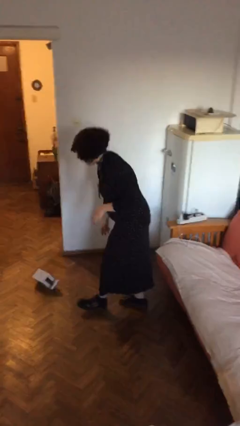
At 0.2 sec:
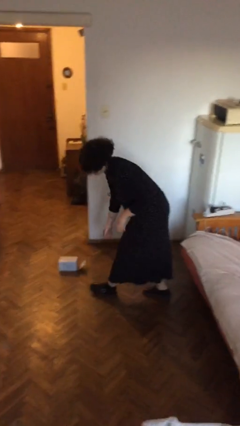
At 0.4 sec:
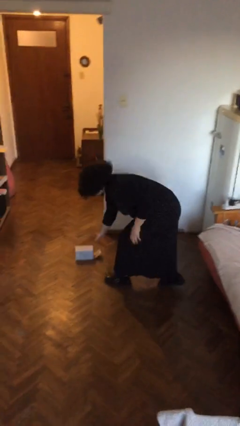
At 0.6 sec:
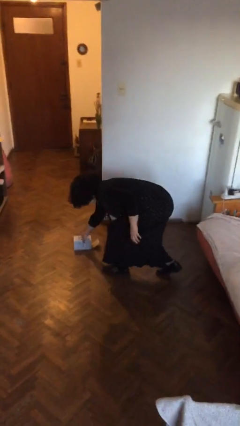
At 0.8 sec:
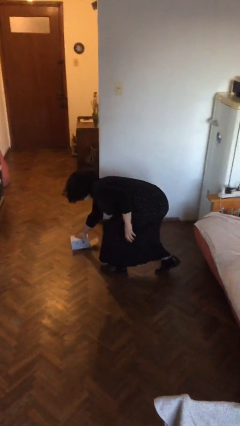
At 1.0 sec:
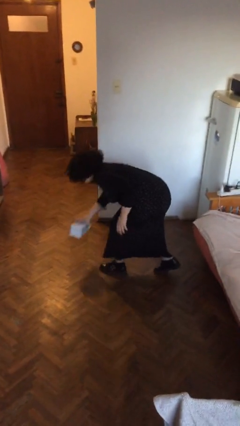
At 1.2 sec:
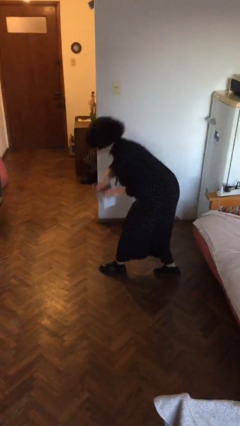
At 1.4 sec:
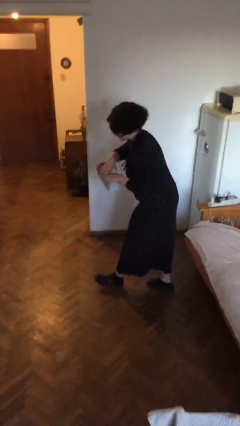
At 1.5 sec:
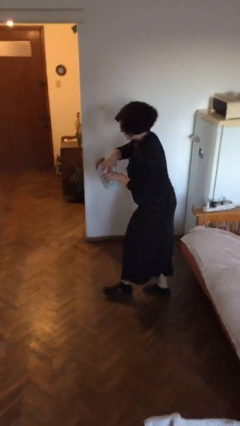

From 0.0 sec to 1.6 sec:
person picks up object from floor

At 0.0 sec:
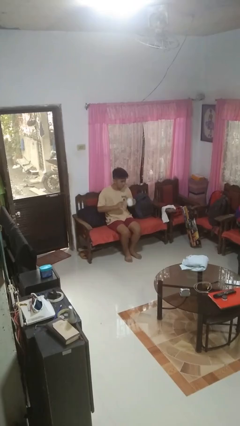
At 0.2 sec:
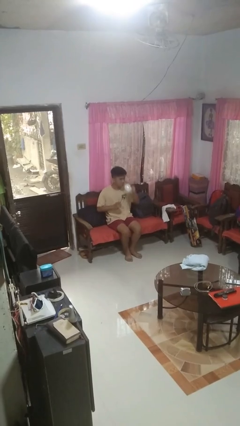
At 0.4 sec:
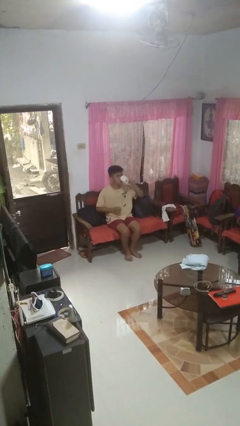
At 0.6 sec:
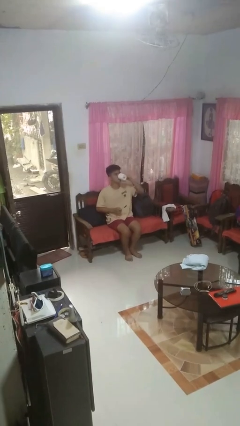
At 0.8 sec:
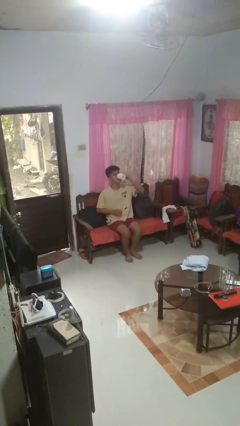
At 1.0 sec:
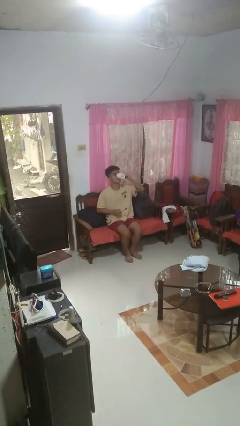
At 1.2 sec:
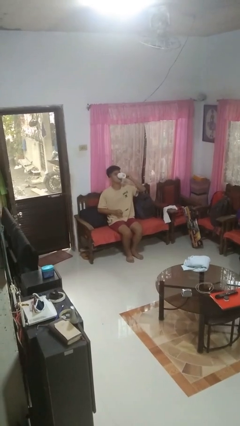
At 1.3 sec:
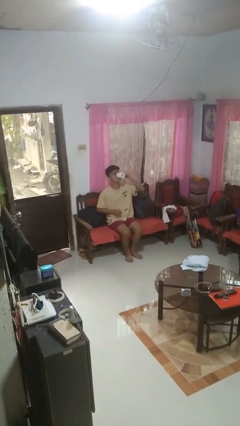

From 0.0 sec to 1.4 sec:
person drinks from mug

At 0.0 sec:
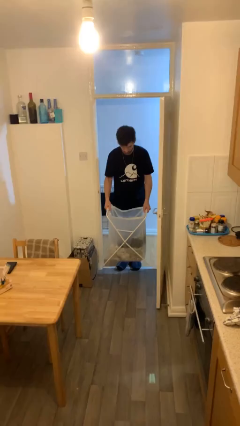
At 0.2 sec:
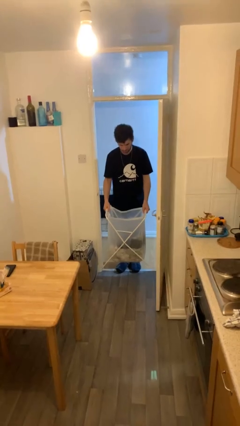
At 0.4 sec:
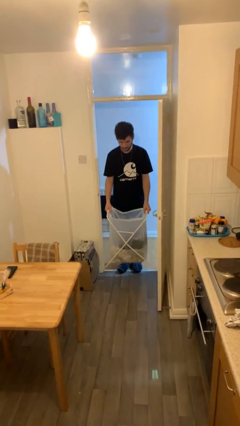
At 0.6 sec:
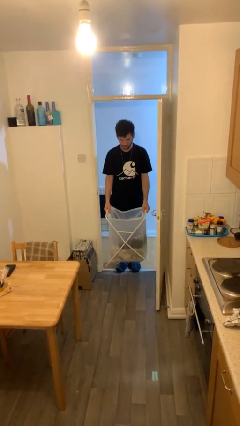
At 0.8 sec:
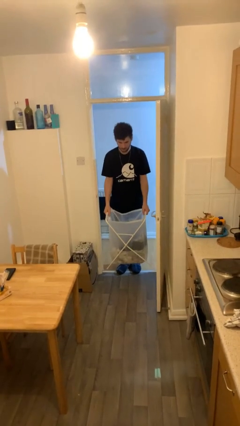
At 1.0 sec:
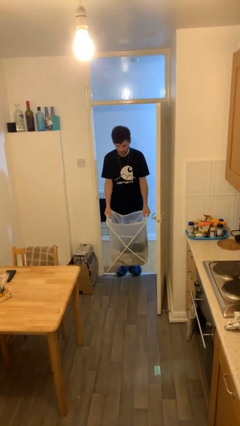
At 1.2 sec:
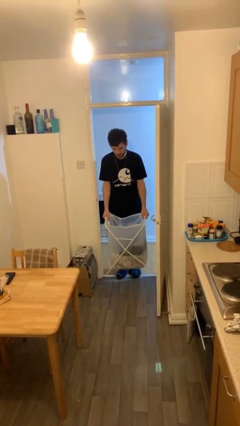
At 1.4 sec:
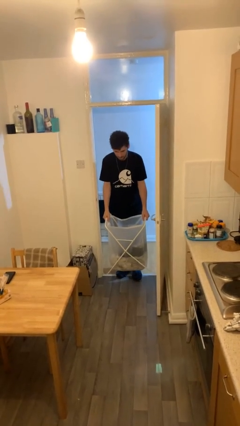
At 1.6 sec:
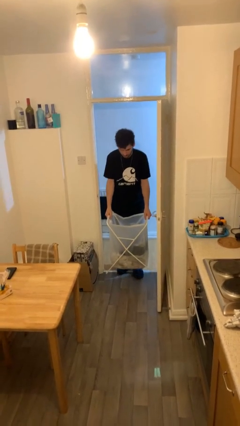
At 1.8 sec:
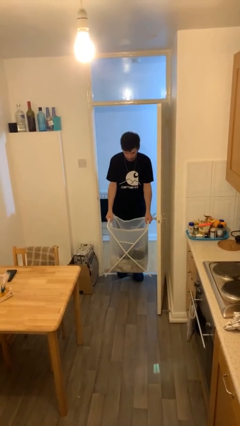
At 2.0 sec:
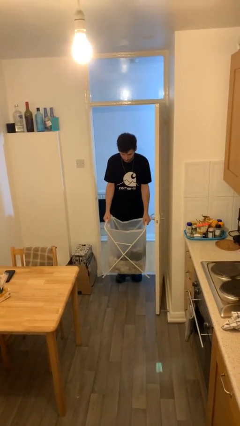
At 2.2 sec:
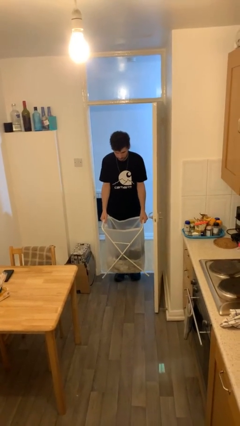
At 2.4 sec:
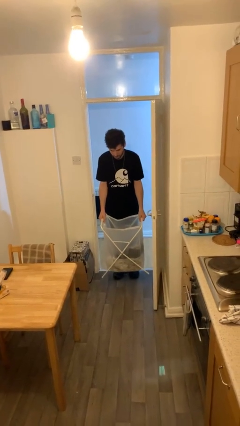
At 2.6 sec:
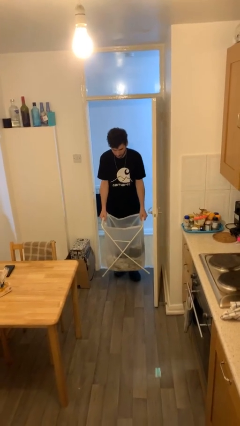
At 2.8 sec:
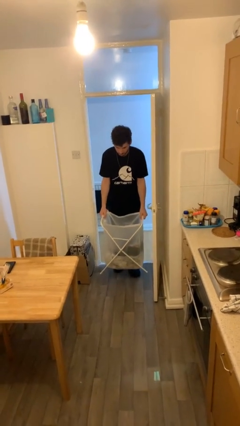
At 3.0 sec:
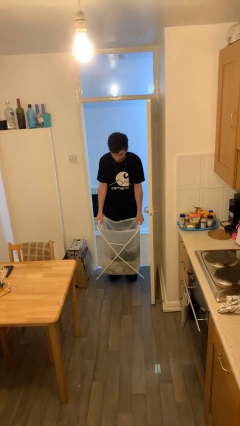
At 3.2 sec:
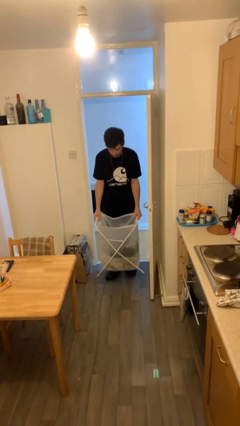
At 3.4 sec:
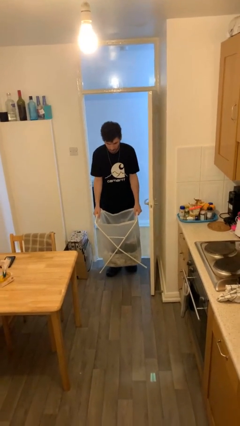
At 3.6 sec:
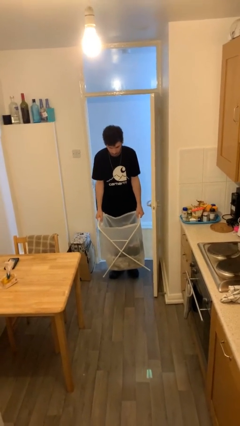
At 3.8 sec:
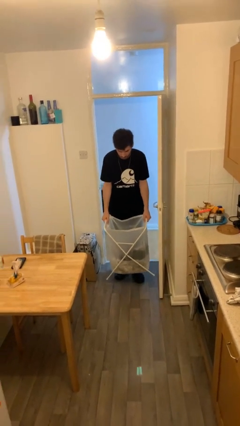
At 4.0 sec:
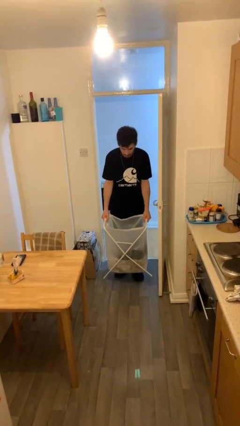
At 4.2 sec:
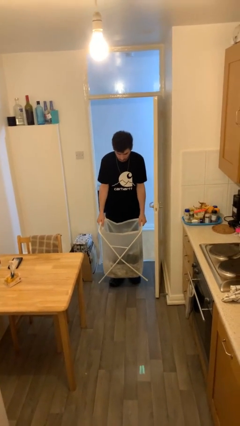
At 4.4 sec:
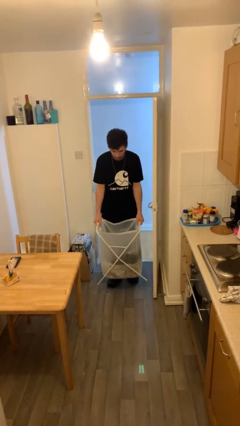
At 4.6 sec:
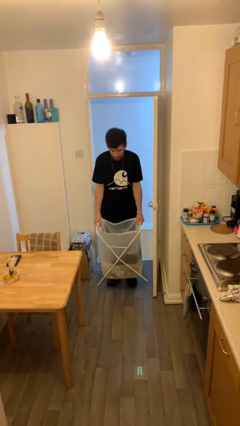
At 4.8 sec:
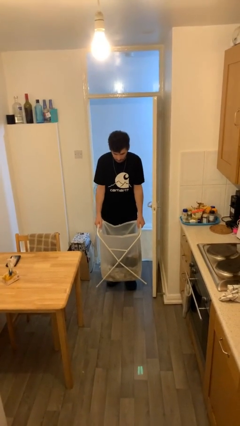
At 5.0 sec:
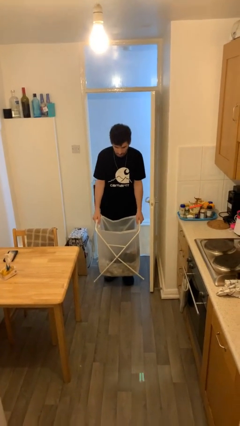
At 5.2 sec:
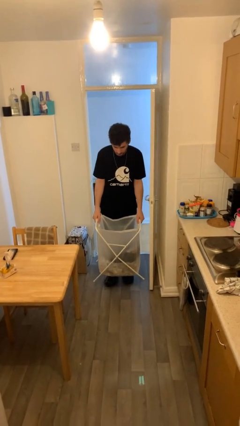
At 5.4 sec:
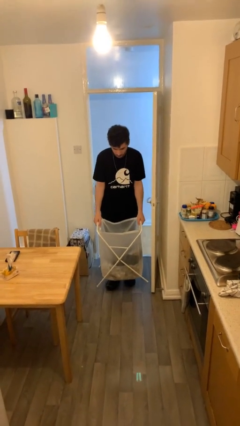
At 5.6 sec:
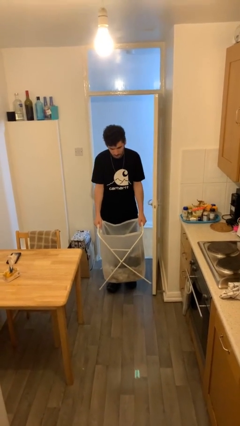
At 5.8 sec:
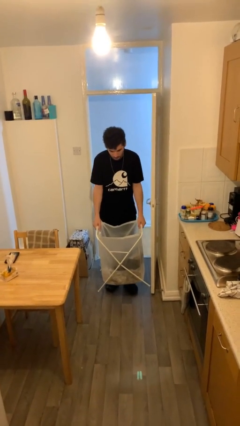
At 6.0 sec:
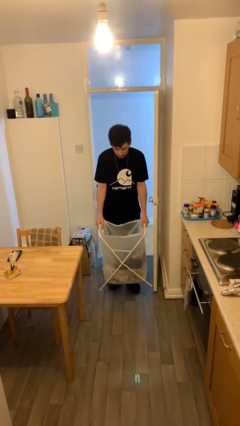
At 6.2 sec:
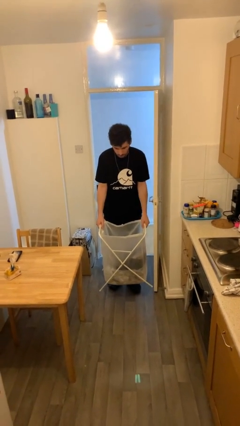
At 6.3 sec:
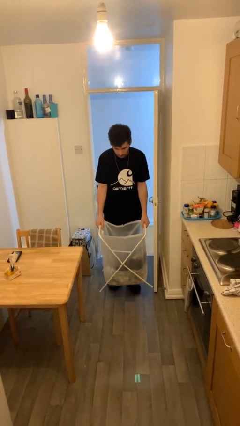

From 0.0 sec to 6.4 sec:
person carries heavy object

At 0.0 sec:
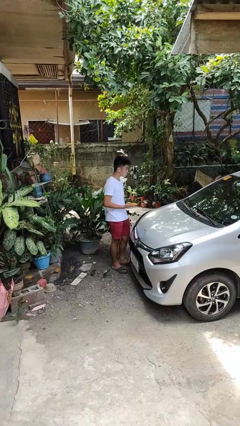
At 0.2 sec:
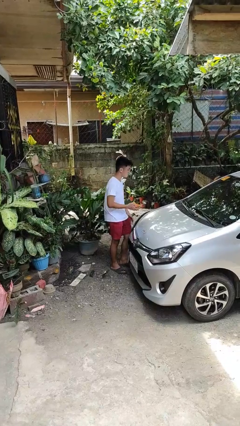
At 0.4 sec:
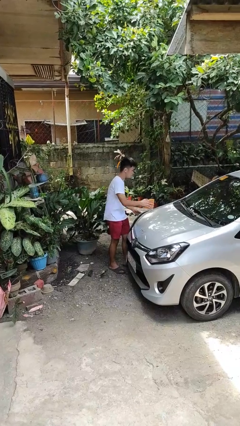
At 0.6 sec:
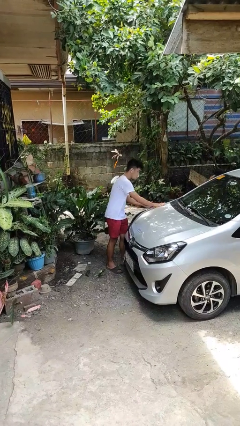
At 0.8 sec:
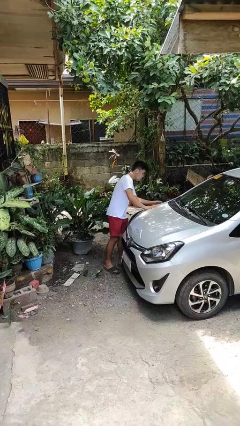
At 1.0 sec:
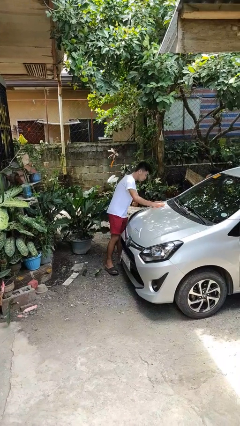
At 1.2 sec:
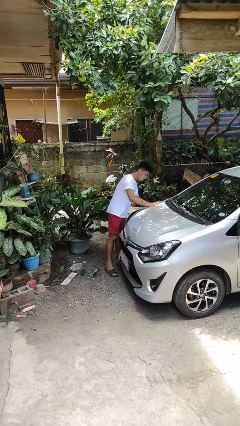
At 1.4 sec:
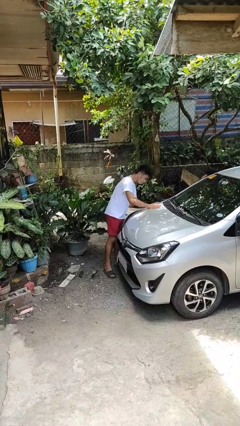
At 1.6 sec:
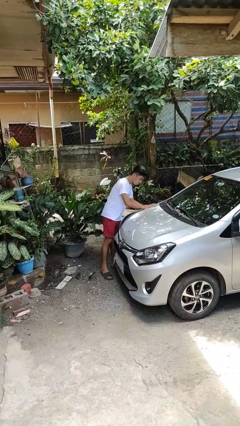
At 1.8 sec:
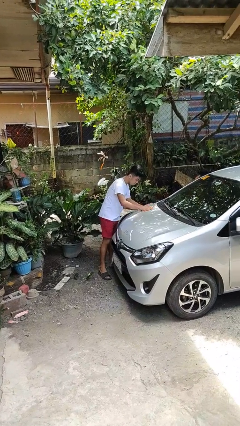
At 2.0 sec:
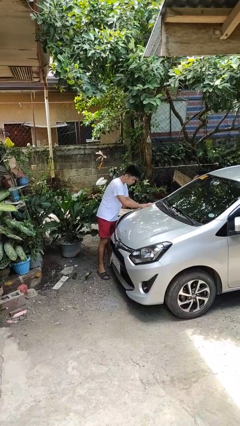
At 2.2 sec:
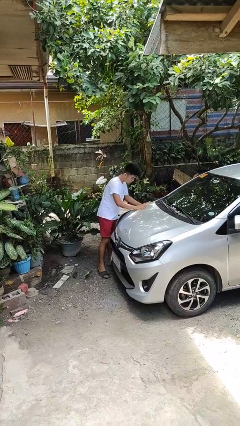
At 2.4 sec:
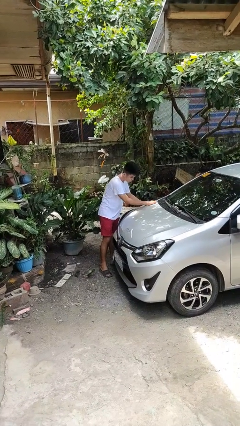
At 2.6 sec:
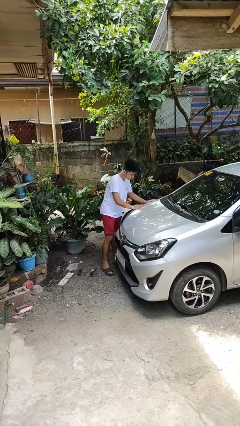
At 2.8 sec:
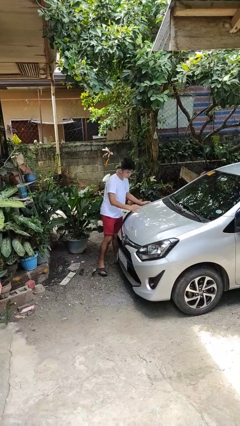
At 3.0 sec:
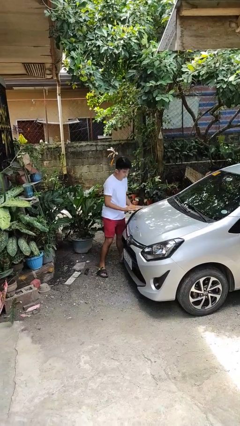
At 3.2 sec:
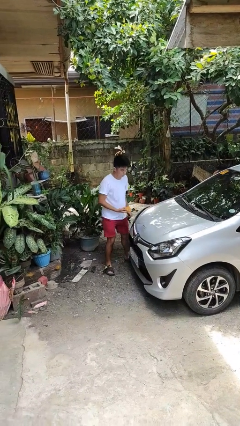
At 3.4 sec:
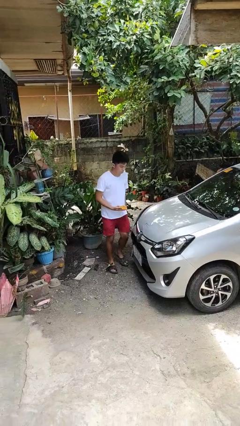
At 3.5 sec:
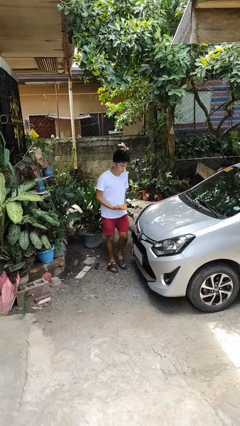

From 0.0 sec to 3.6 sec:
person polishes car with rag

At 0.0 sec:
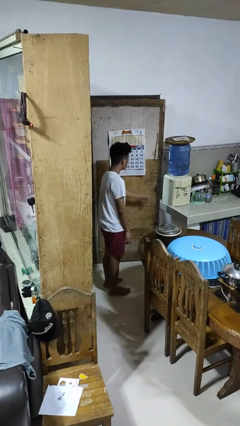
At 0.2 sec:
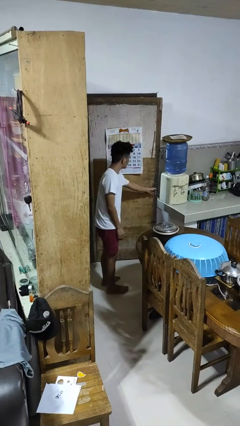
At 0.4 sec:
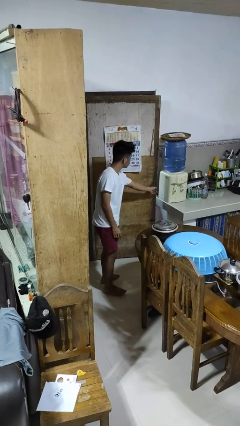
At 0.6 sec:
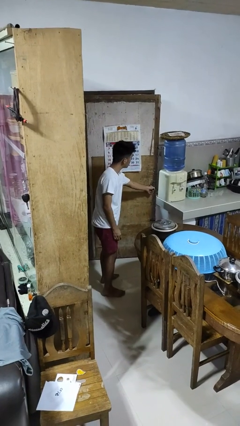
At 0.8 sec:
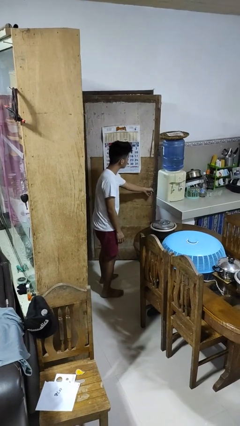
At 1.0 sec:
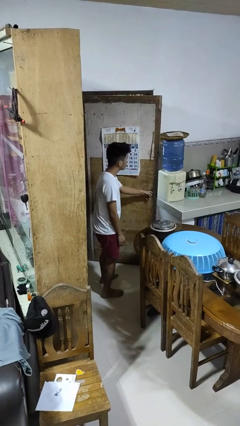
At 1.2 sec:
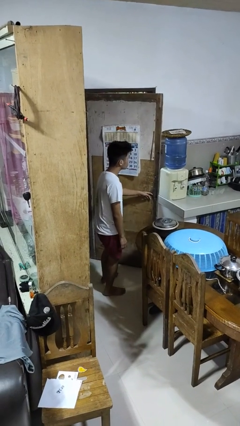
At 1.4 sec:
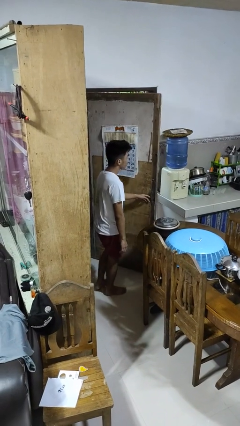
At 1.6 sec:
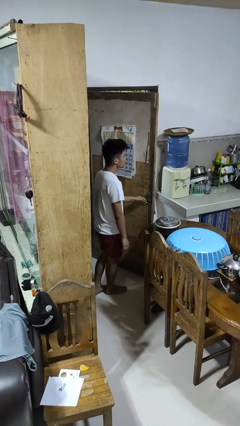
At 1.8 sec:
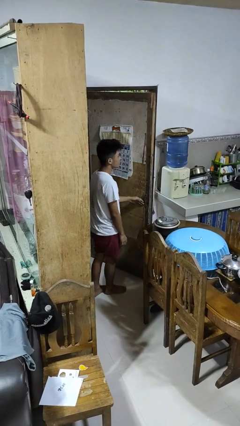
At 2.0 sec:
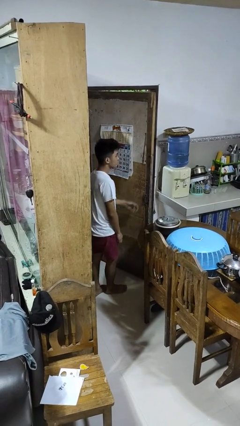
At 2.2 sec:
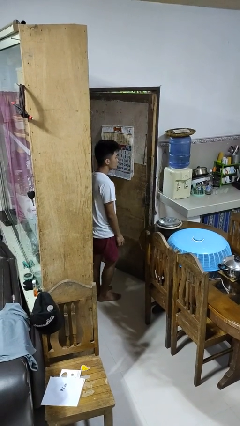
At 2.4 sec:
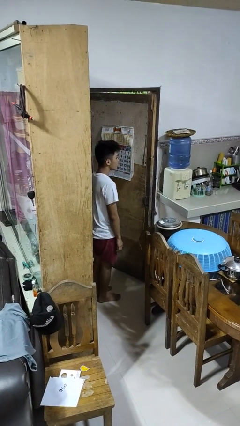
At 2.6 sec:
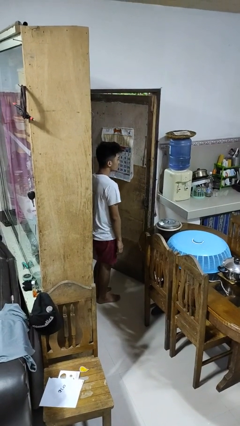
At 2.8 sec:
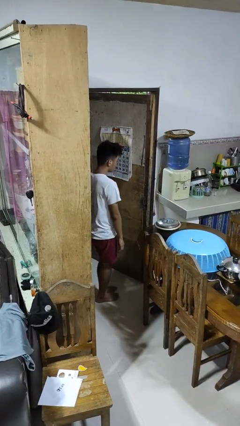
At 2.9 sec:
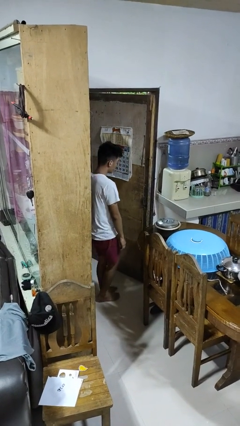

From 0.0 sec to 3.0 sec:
person opens facility door

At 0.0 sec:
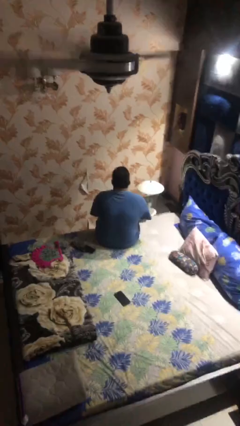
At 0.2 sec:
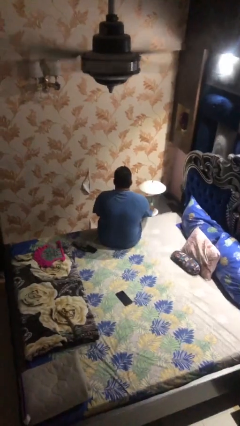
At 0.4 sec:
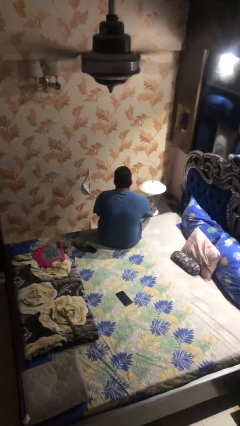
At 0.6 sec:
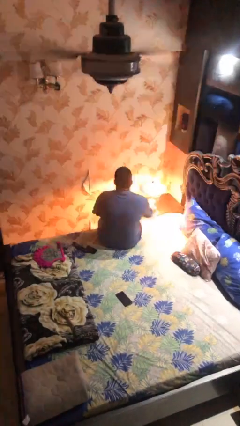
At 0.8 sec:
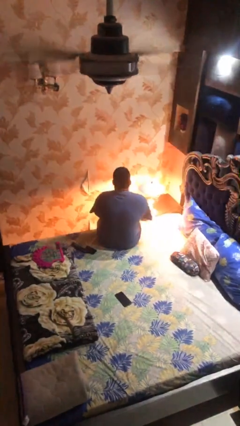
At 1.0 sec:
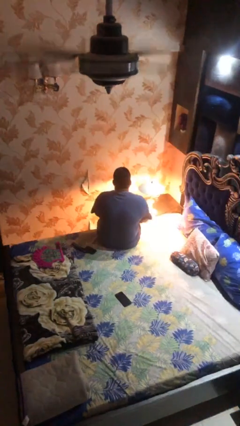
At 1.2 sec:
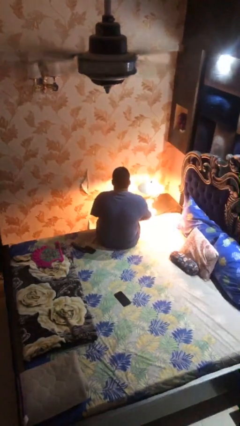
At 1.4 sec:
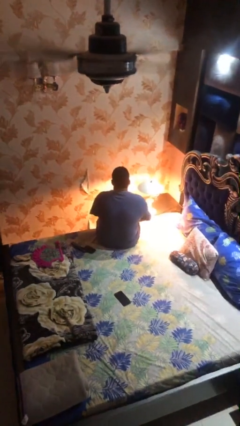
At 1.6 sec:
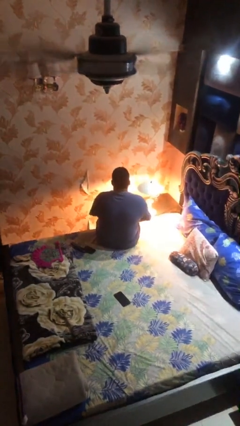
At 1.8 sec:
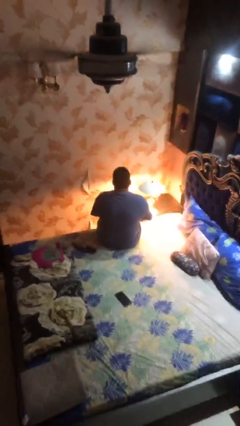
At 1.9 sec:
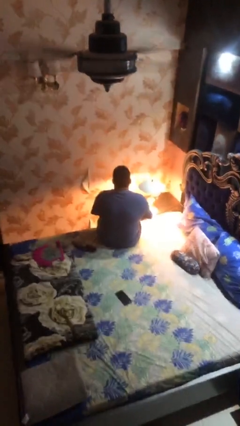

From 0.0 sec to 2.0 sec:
person turns on lamp
